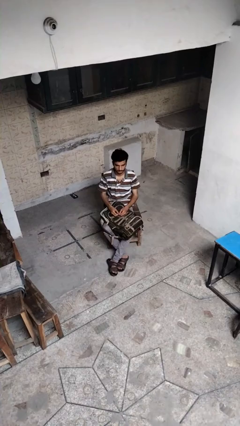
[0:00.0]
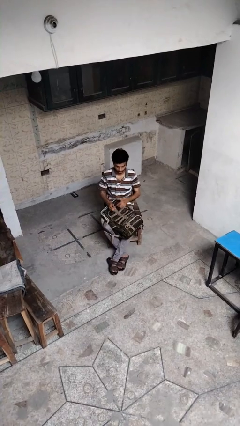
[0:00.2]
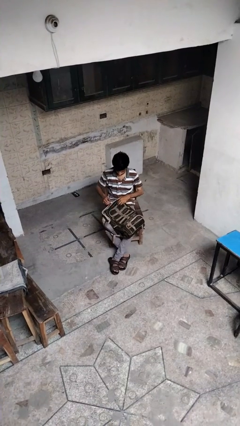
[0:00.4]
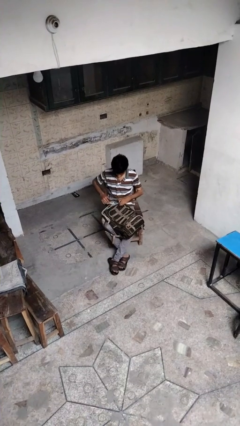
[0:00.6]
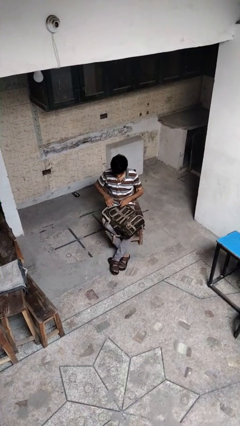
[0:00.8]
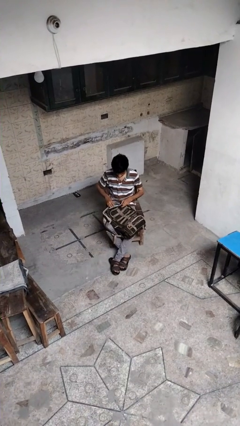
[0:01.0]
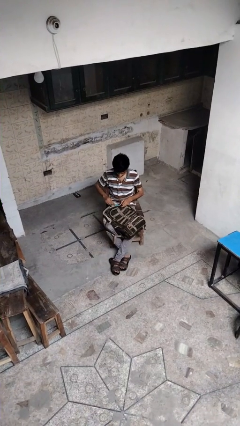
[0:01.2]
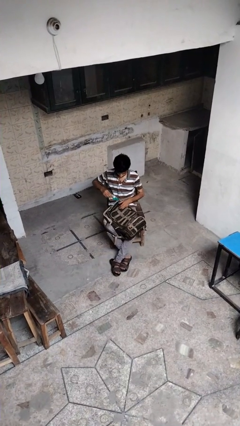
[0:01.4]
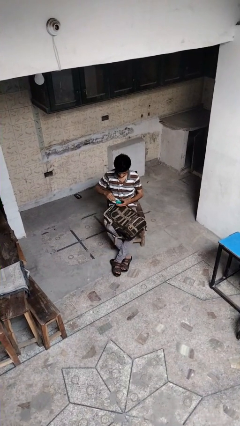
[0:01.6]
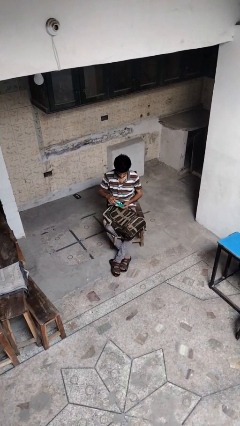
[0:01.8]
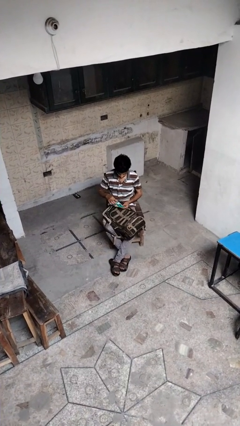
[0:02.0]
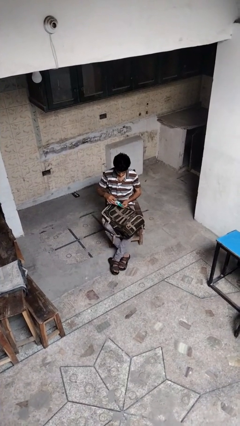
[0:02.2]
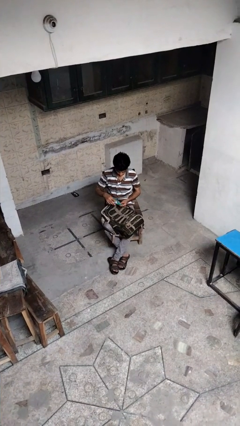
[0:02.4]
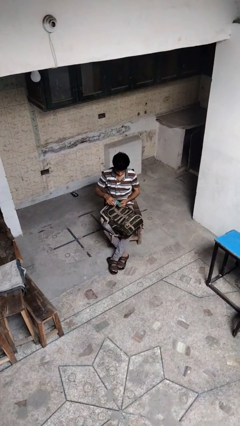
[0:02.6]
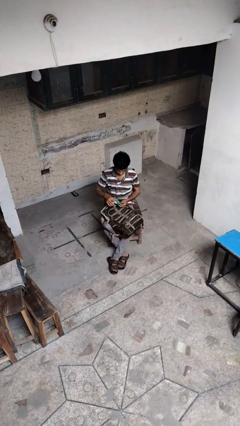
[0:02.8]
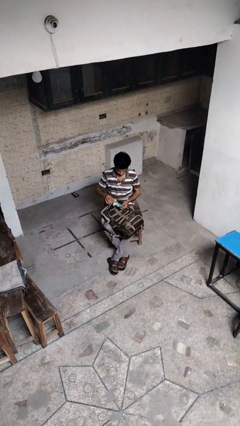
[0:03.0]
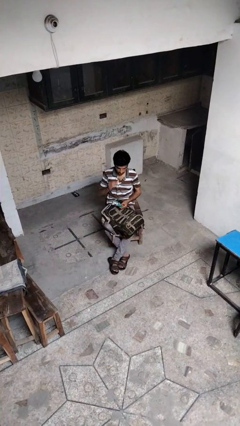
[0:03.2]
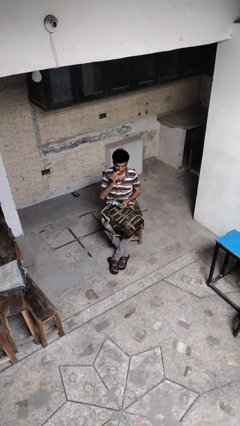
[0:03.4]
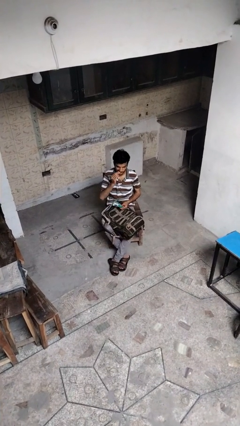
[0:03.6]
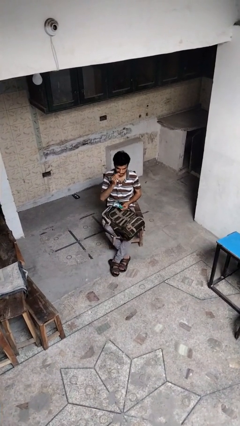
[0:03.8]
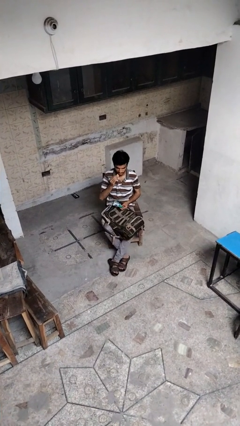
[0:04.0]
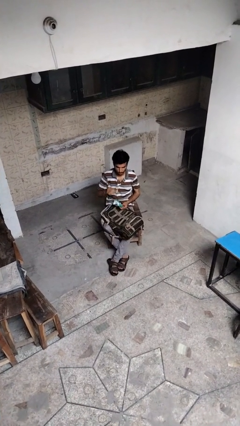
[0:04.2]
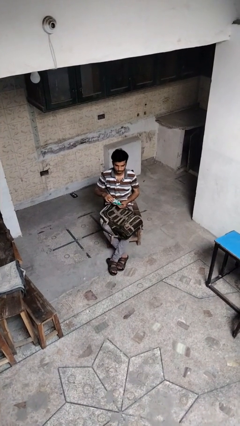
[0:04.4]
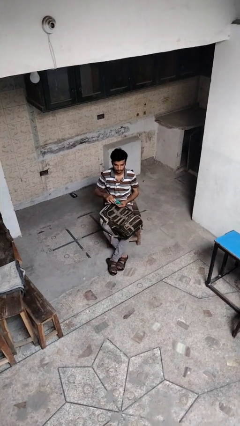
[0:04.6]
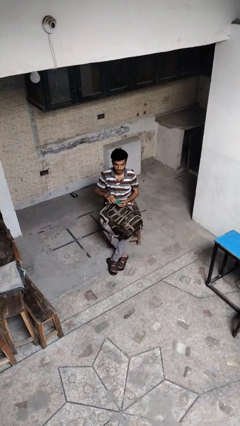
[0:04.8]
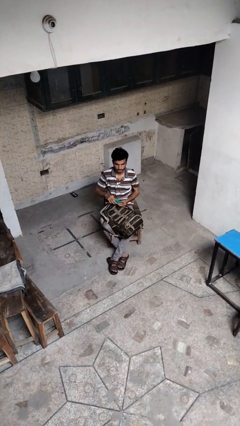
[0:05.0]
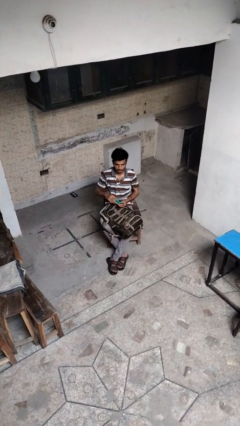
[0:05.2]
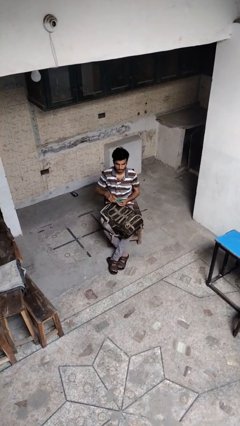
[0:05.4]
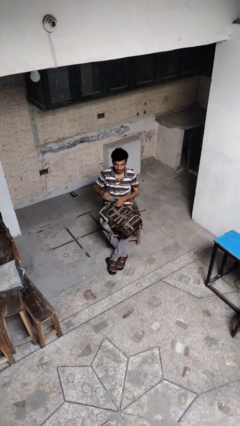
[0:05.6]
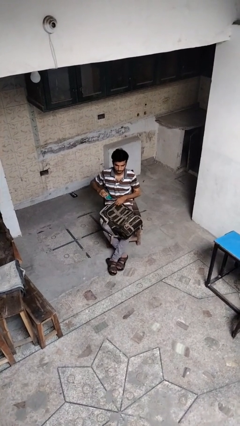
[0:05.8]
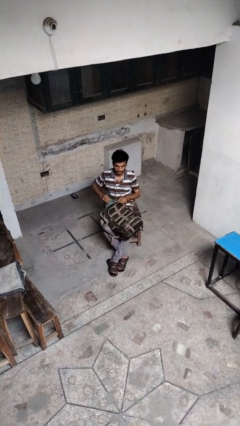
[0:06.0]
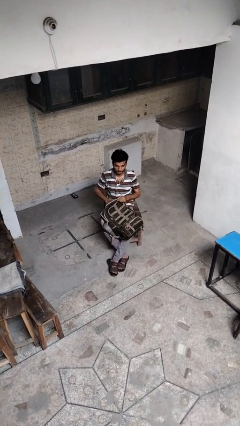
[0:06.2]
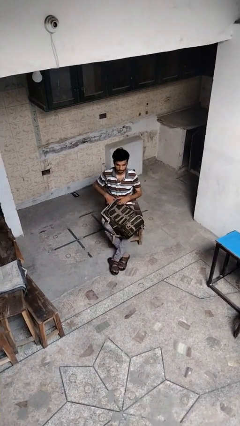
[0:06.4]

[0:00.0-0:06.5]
person eats snack from bag

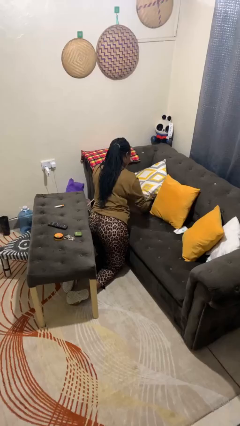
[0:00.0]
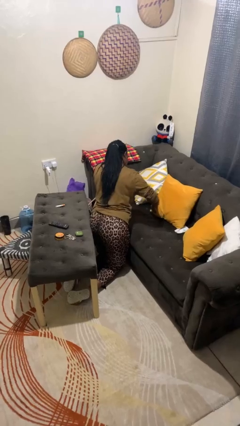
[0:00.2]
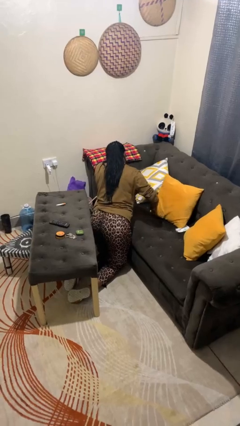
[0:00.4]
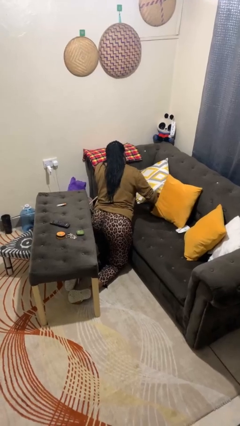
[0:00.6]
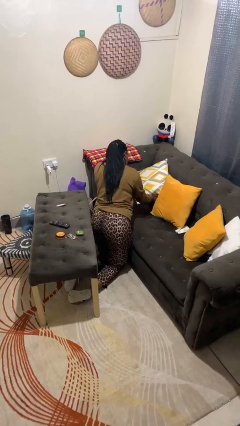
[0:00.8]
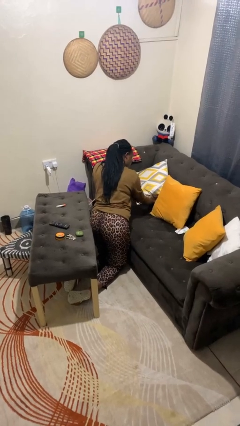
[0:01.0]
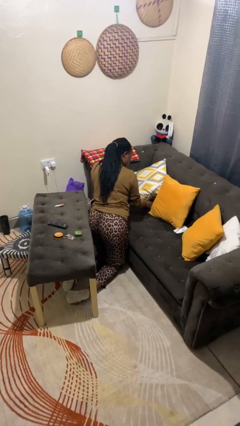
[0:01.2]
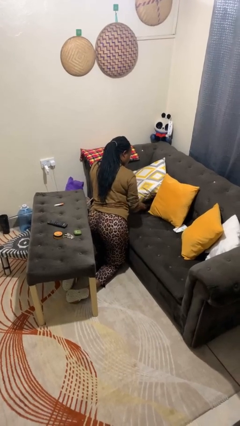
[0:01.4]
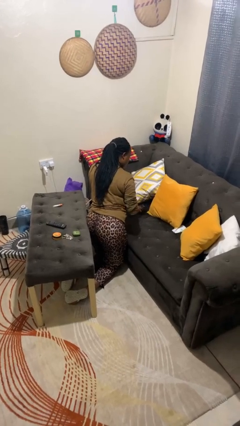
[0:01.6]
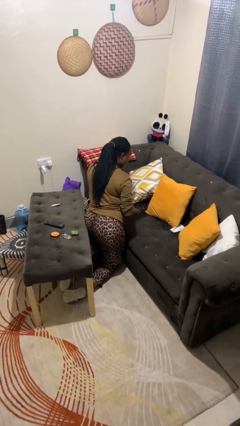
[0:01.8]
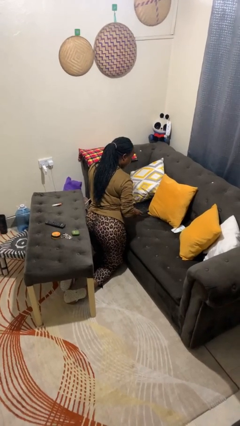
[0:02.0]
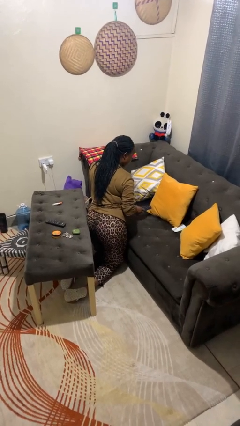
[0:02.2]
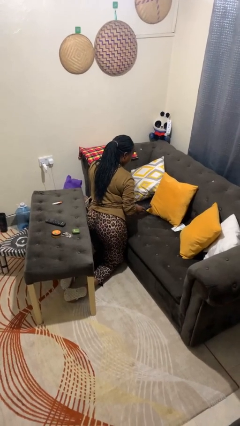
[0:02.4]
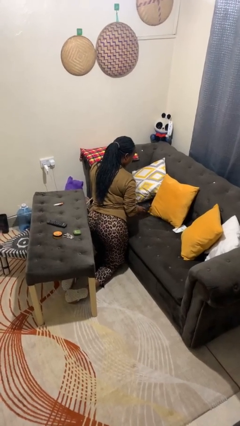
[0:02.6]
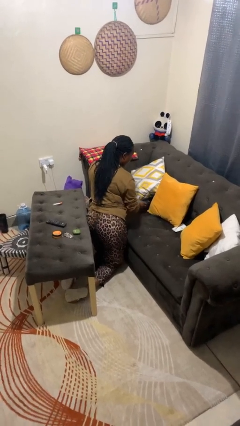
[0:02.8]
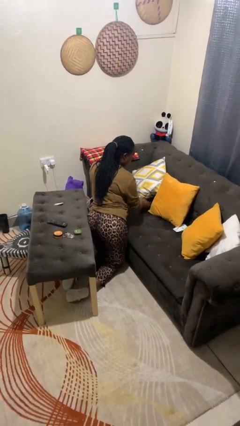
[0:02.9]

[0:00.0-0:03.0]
person searches in couch

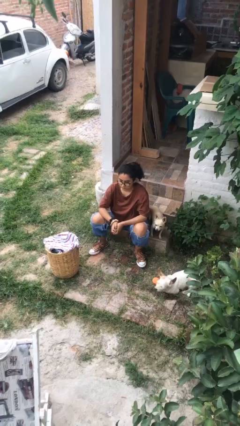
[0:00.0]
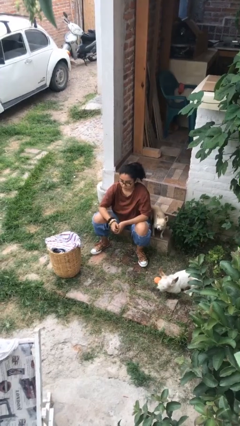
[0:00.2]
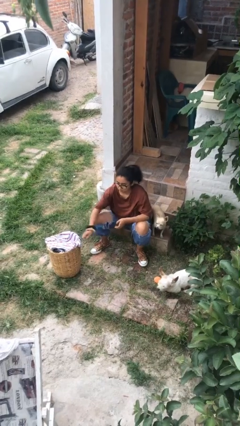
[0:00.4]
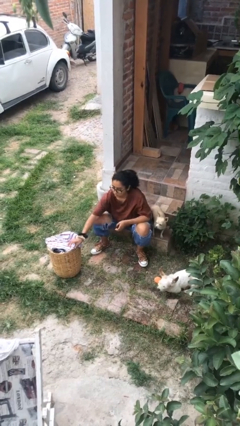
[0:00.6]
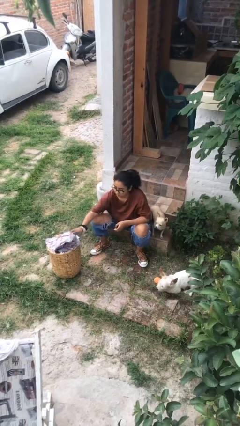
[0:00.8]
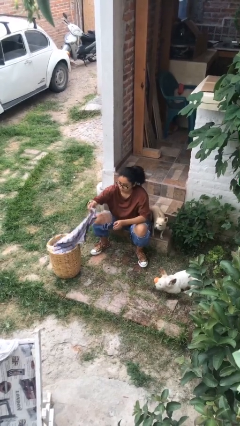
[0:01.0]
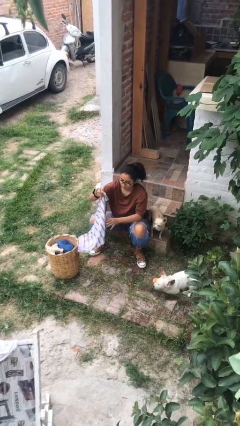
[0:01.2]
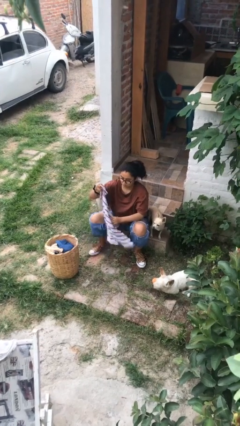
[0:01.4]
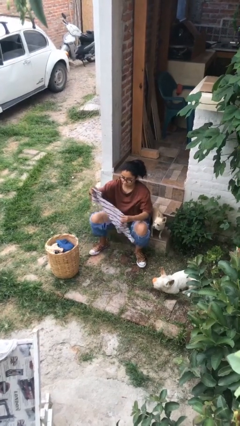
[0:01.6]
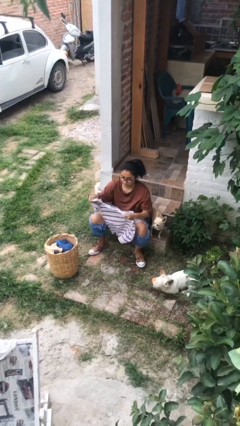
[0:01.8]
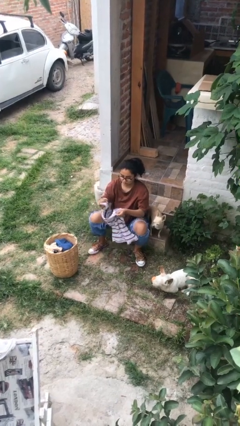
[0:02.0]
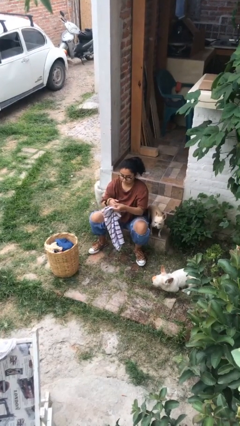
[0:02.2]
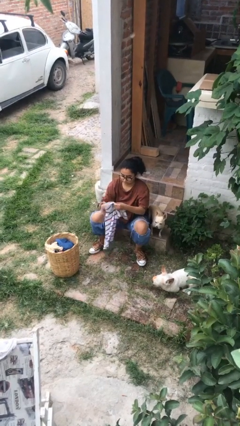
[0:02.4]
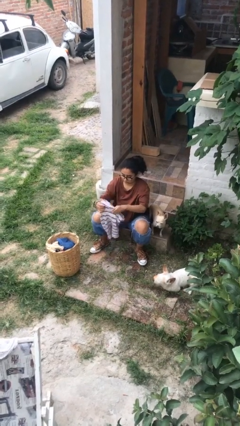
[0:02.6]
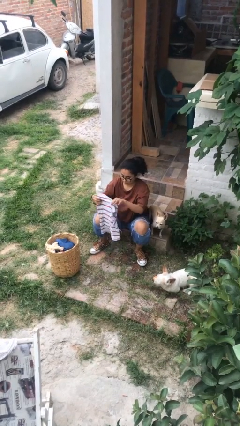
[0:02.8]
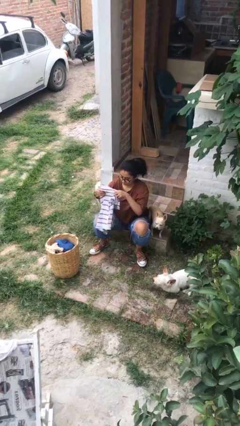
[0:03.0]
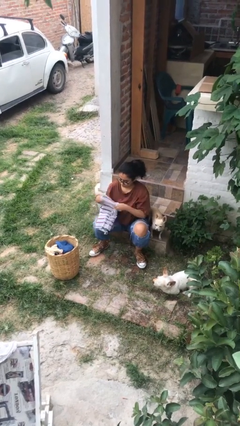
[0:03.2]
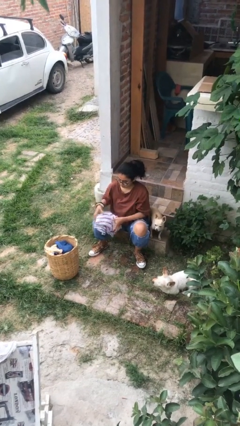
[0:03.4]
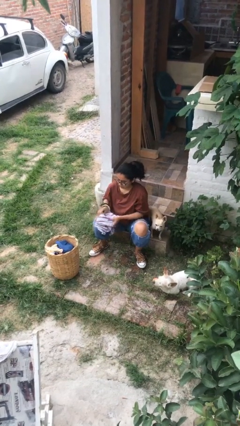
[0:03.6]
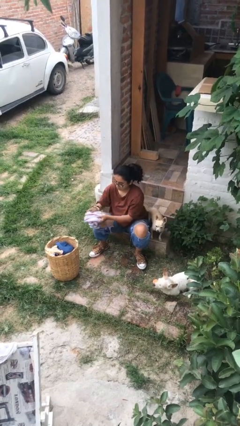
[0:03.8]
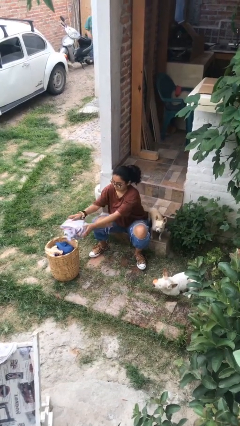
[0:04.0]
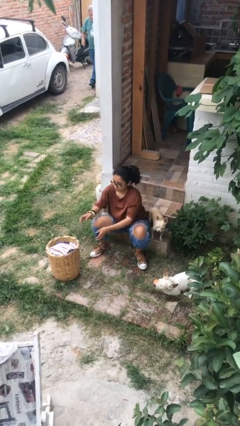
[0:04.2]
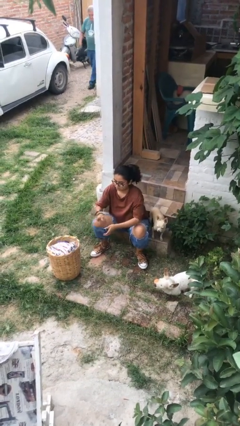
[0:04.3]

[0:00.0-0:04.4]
person folds shirt

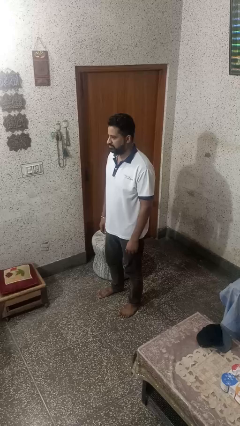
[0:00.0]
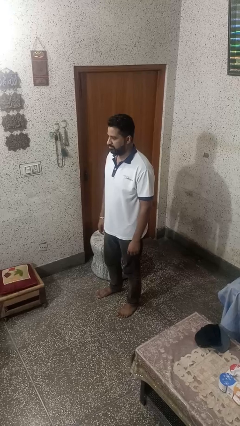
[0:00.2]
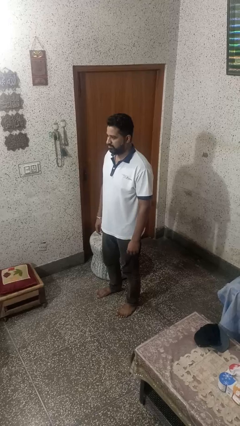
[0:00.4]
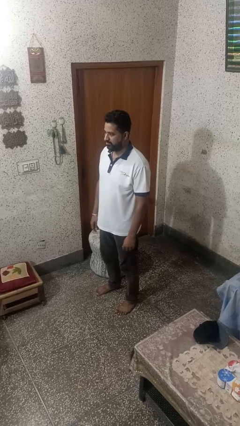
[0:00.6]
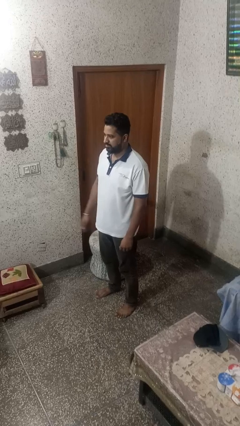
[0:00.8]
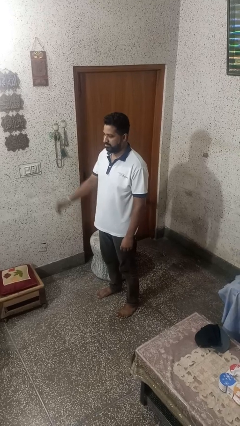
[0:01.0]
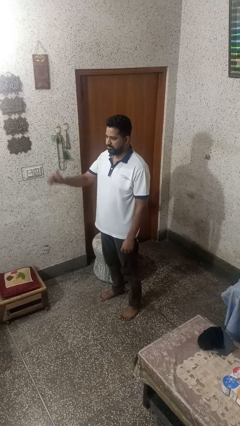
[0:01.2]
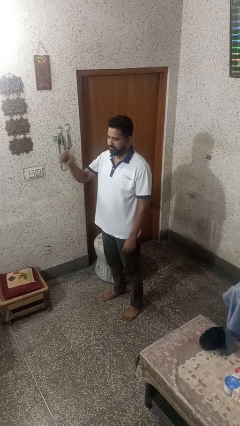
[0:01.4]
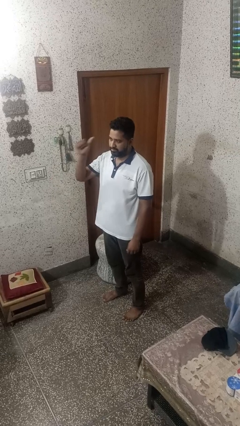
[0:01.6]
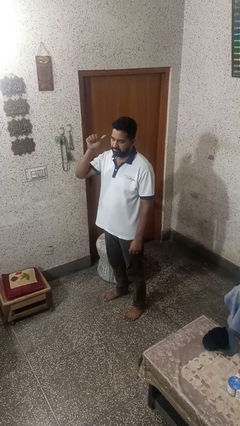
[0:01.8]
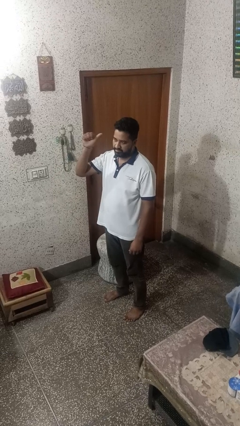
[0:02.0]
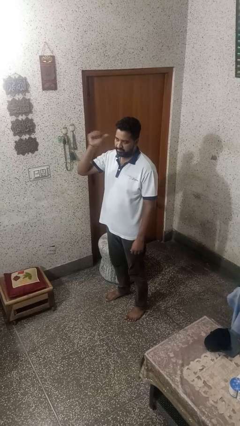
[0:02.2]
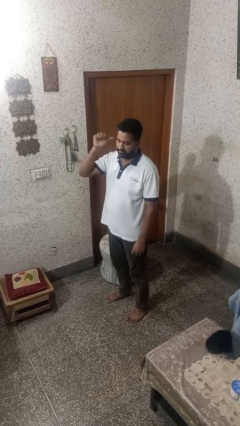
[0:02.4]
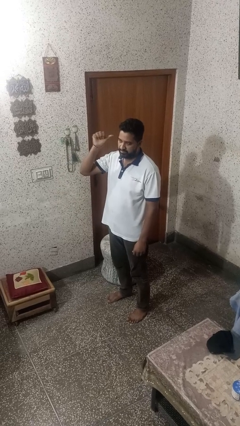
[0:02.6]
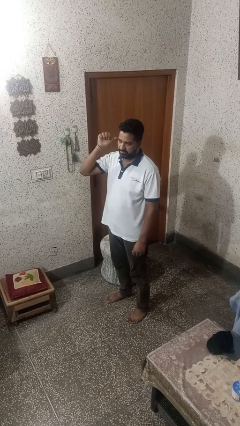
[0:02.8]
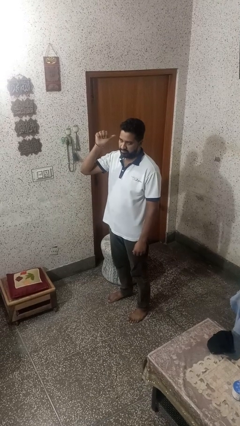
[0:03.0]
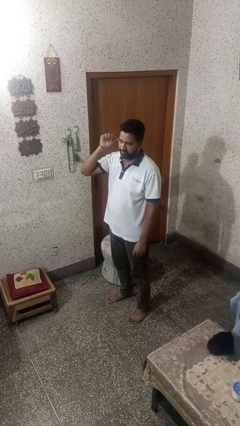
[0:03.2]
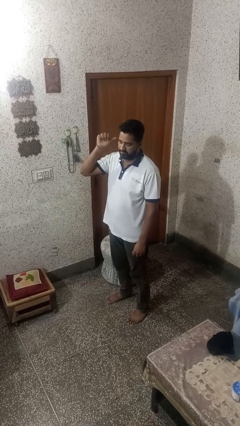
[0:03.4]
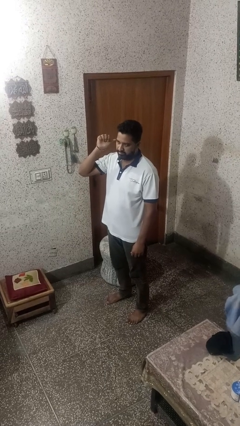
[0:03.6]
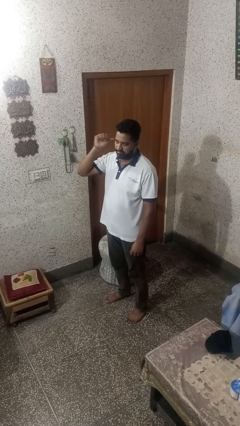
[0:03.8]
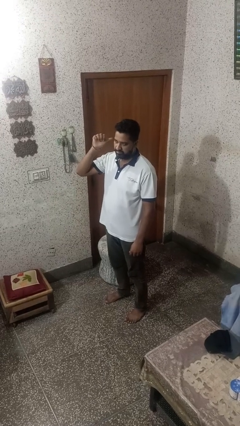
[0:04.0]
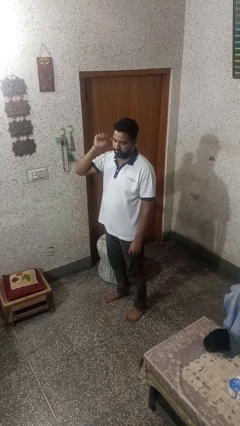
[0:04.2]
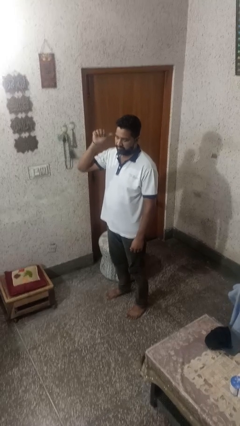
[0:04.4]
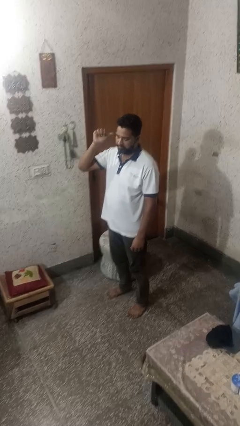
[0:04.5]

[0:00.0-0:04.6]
person gestures behind me
